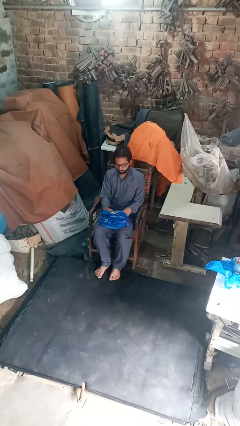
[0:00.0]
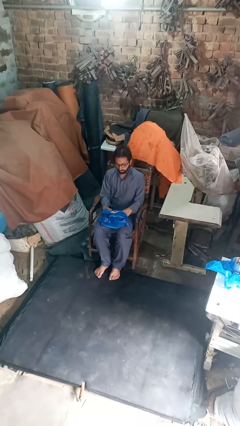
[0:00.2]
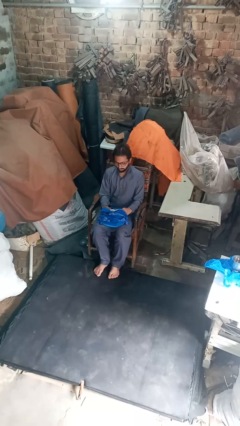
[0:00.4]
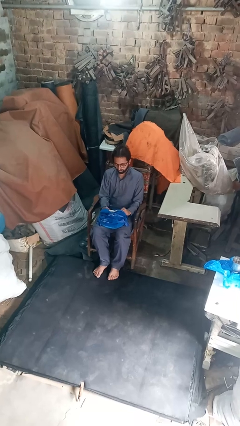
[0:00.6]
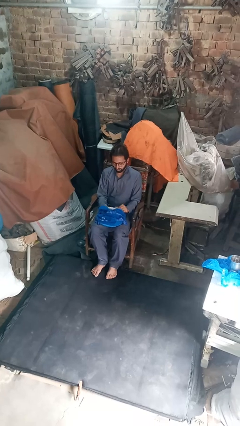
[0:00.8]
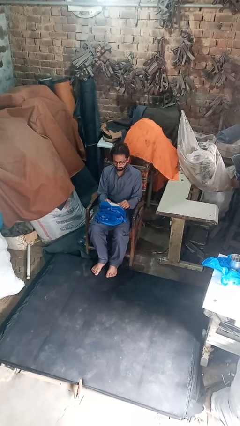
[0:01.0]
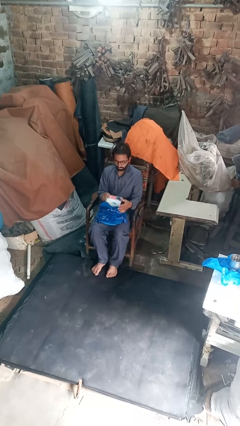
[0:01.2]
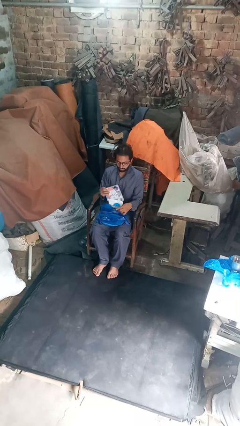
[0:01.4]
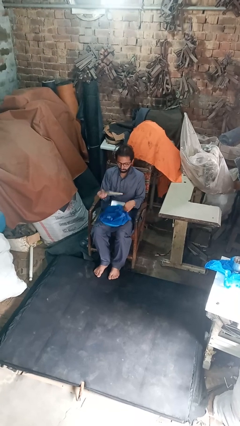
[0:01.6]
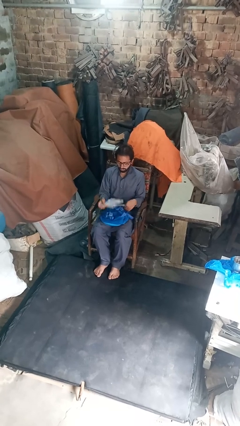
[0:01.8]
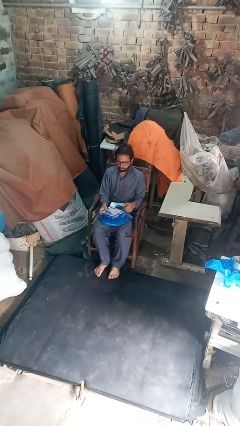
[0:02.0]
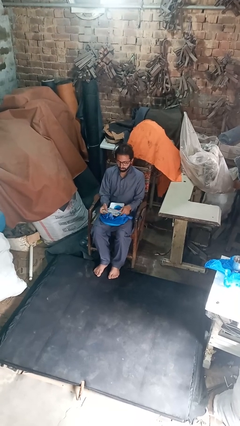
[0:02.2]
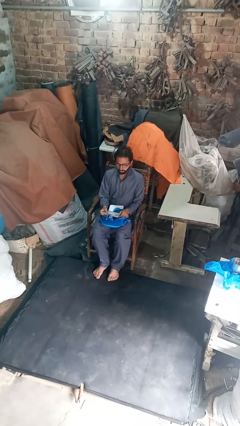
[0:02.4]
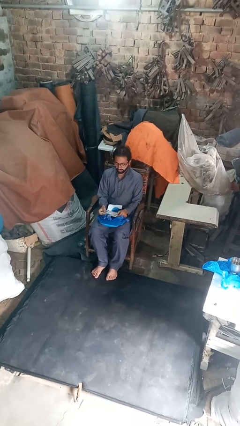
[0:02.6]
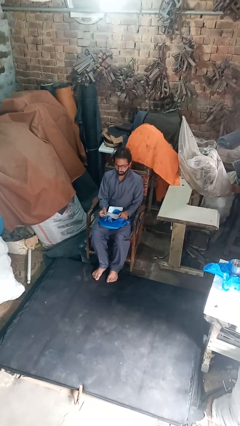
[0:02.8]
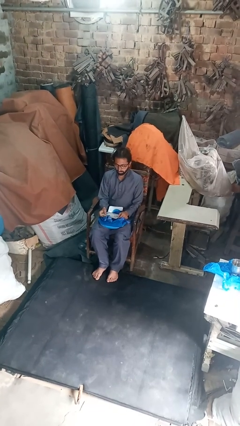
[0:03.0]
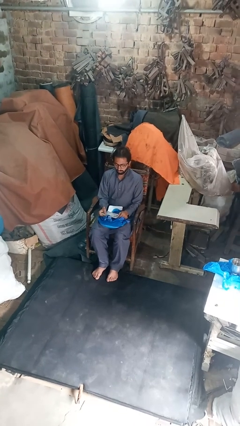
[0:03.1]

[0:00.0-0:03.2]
person takes object from backpack

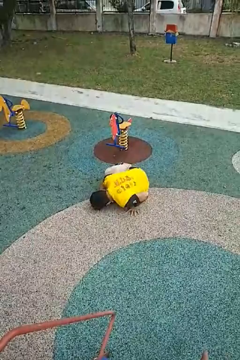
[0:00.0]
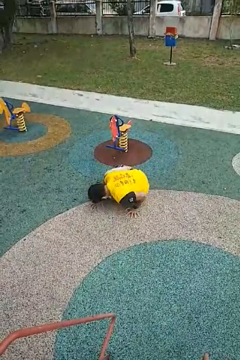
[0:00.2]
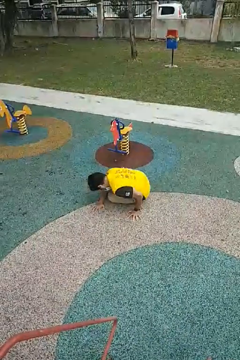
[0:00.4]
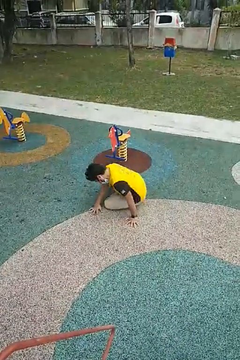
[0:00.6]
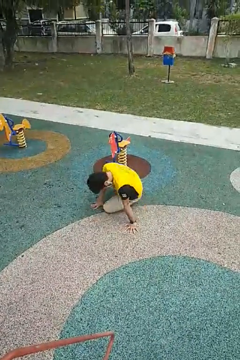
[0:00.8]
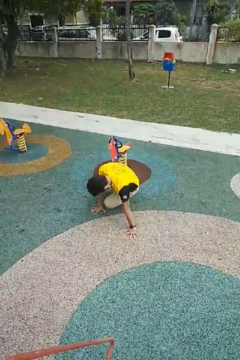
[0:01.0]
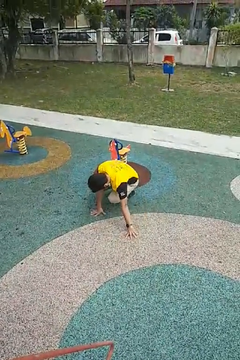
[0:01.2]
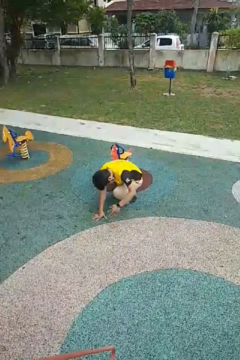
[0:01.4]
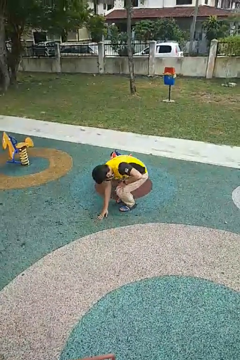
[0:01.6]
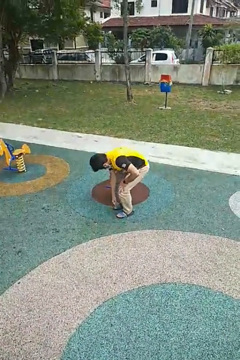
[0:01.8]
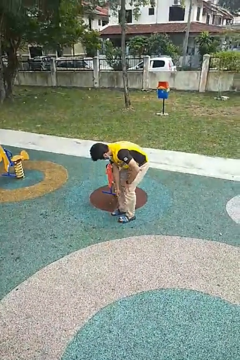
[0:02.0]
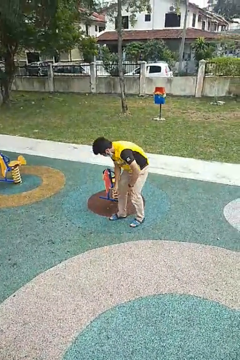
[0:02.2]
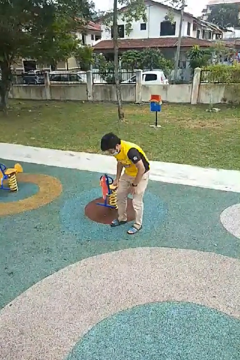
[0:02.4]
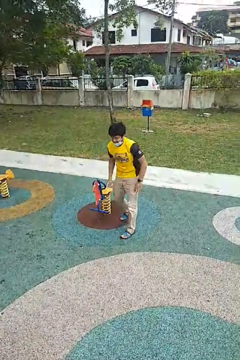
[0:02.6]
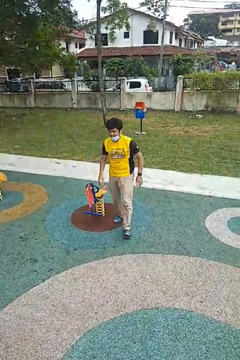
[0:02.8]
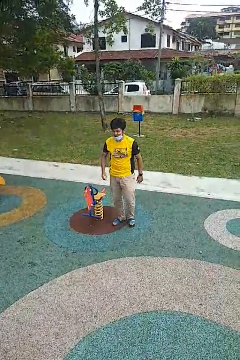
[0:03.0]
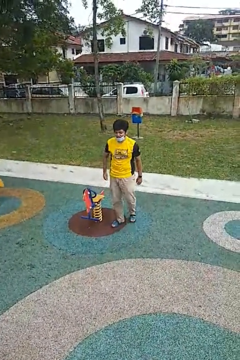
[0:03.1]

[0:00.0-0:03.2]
person stands up from floor

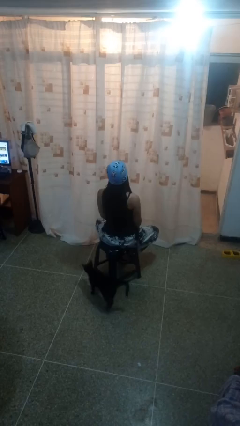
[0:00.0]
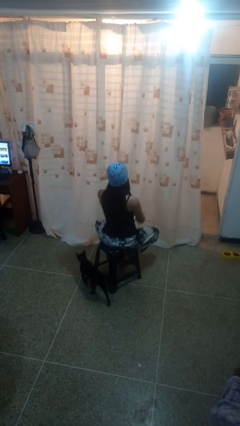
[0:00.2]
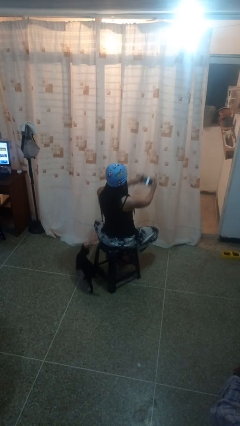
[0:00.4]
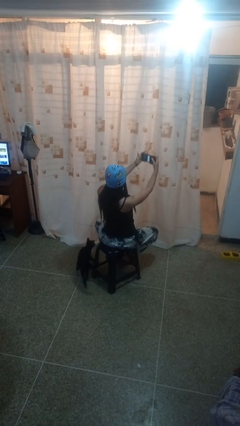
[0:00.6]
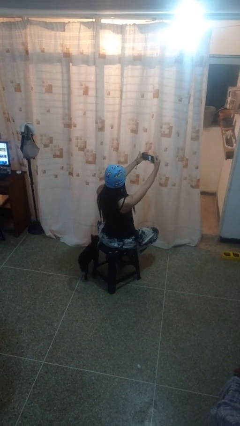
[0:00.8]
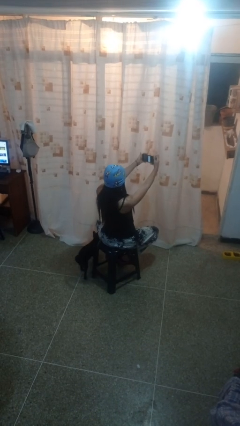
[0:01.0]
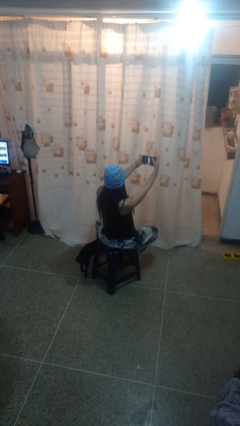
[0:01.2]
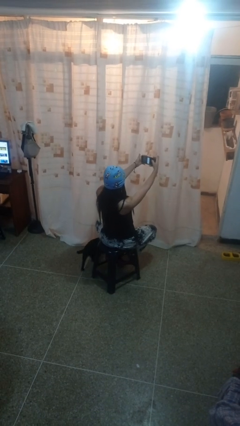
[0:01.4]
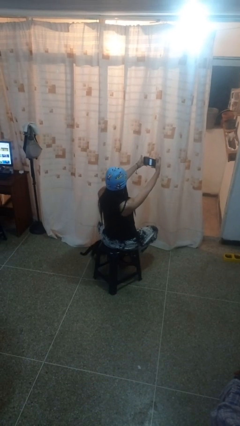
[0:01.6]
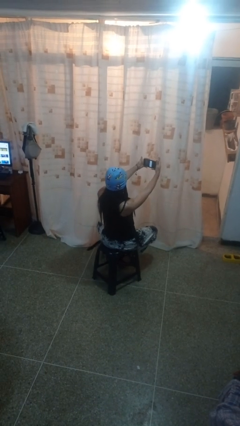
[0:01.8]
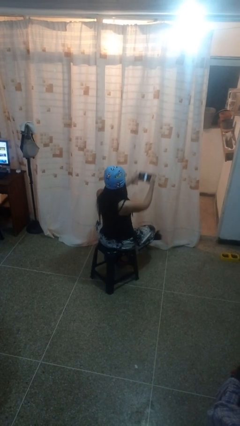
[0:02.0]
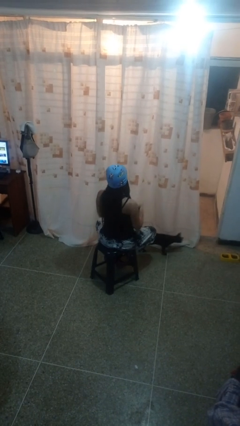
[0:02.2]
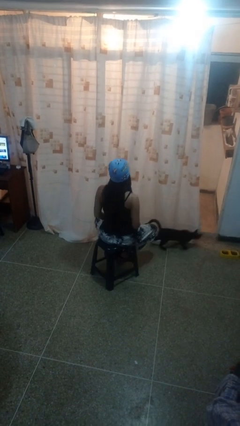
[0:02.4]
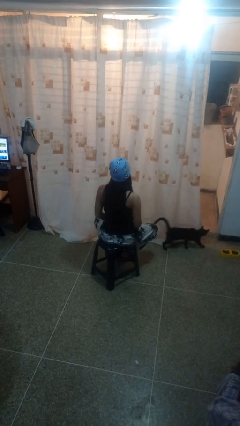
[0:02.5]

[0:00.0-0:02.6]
person takes selfie

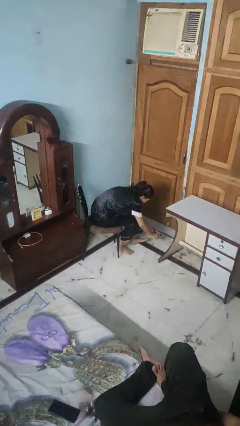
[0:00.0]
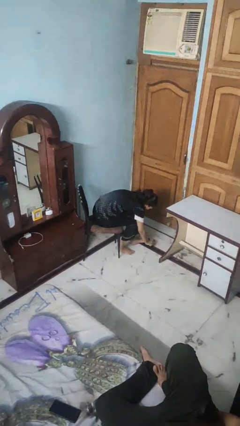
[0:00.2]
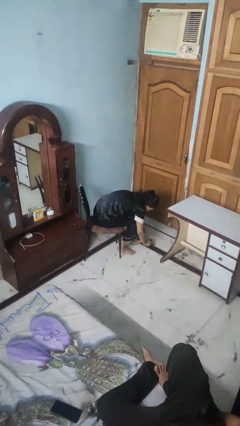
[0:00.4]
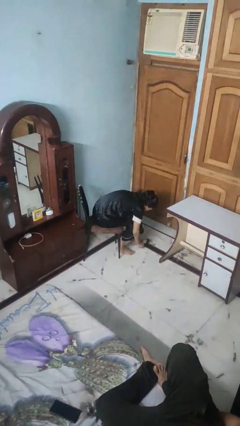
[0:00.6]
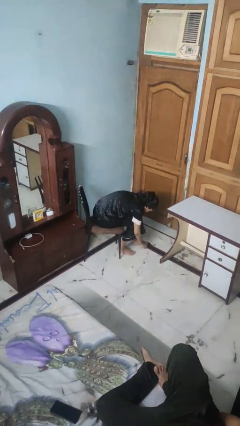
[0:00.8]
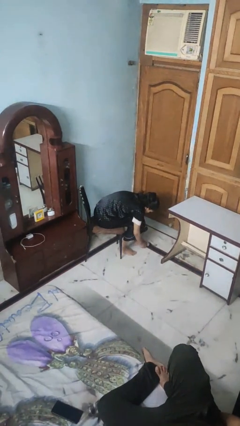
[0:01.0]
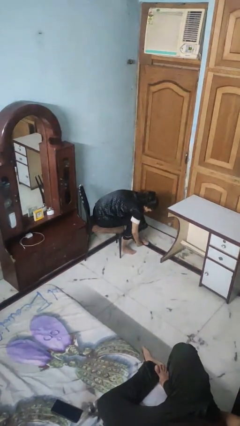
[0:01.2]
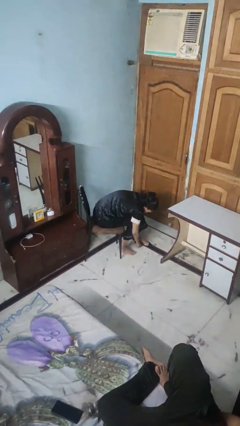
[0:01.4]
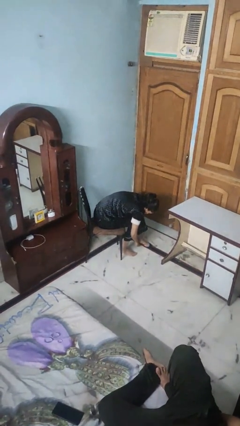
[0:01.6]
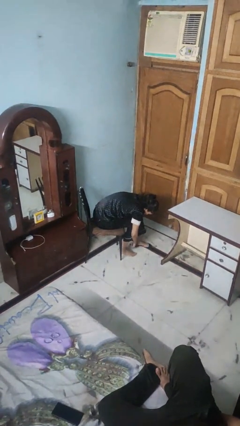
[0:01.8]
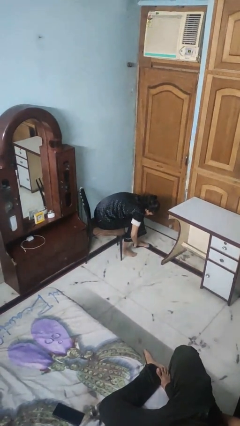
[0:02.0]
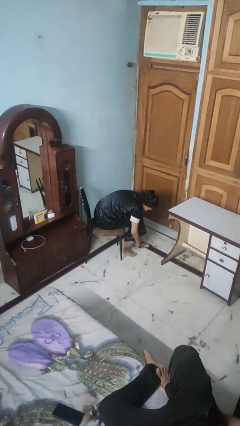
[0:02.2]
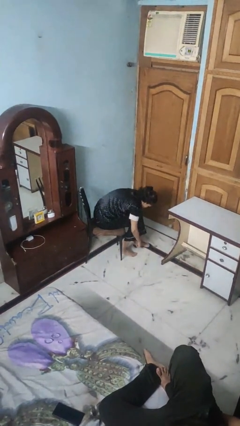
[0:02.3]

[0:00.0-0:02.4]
person puts on socks

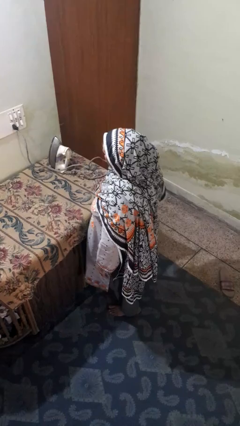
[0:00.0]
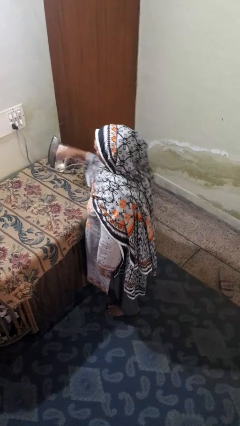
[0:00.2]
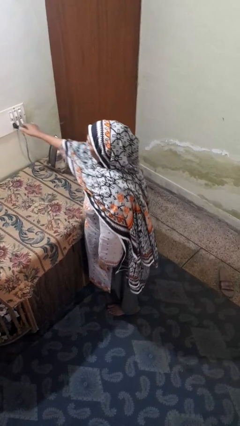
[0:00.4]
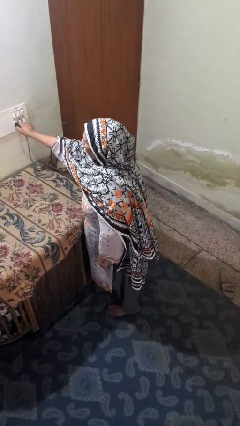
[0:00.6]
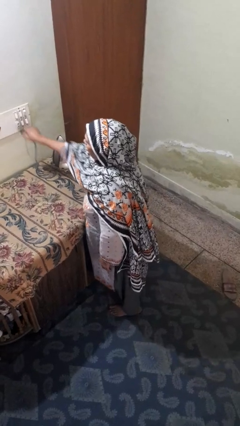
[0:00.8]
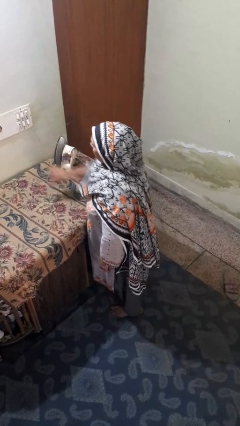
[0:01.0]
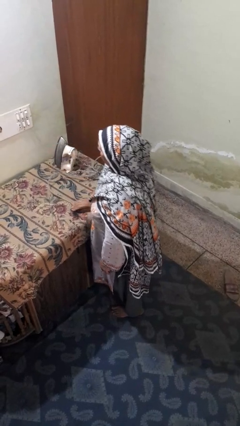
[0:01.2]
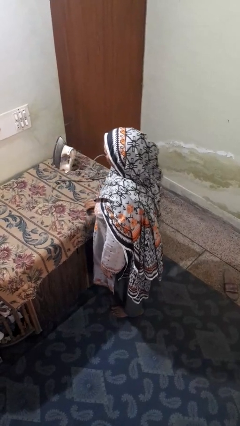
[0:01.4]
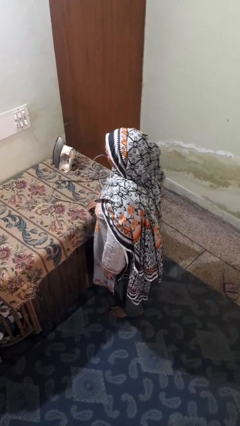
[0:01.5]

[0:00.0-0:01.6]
person unplugs from electrical socket

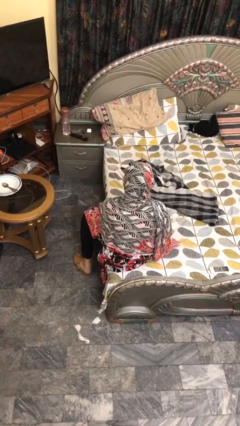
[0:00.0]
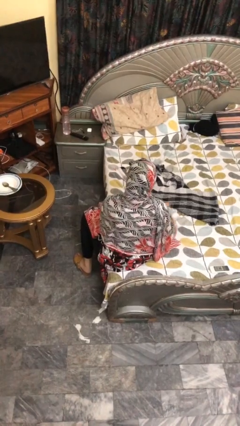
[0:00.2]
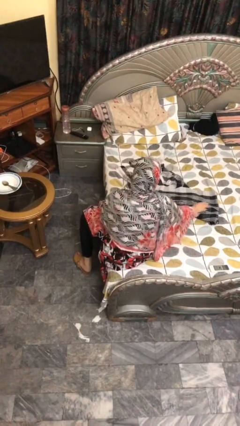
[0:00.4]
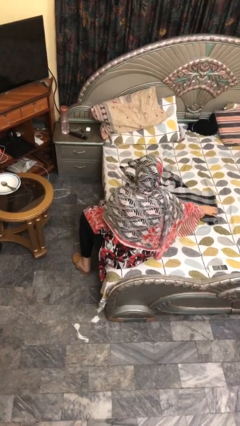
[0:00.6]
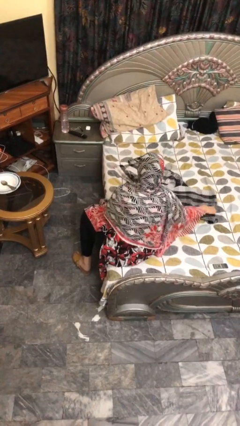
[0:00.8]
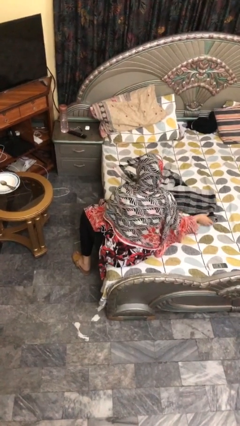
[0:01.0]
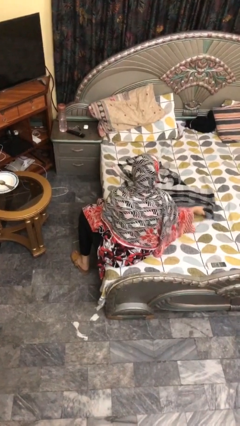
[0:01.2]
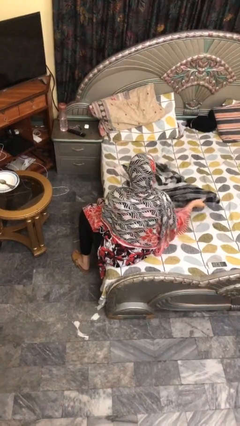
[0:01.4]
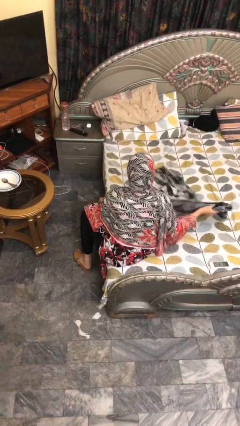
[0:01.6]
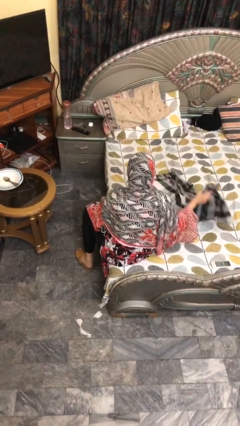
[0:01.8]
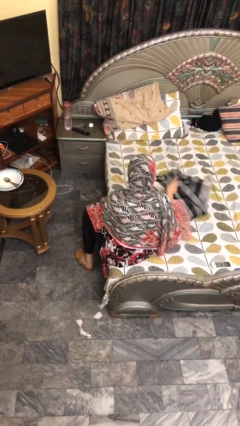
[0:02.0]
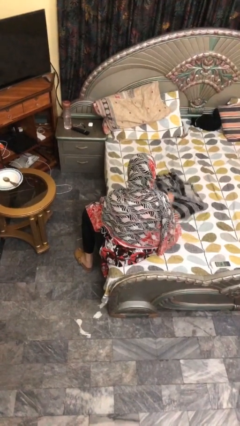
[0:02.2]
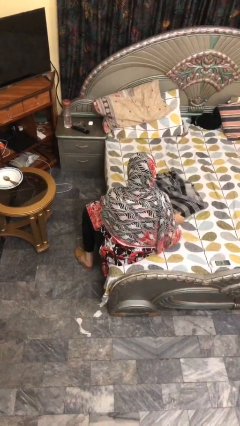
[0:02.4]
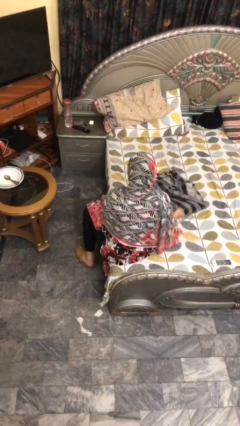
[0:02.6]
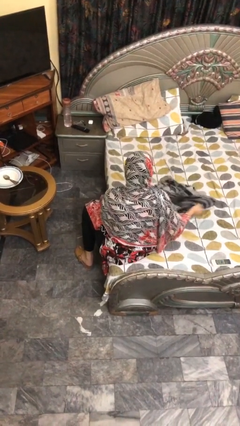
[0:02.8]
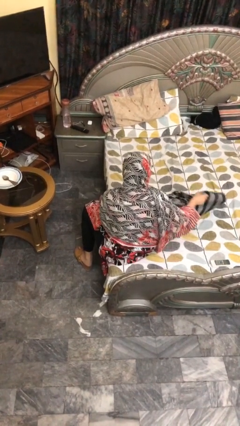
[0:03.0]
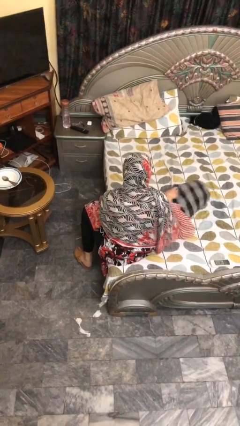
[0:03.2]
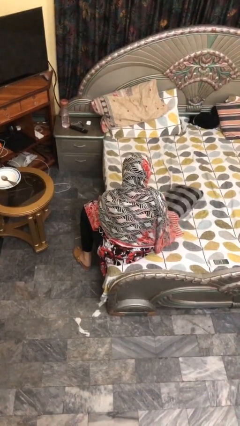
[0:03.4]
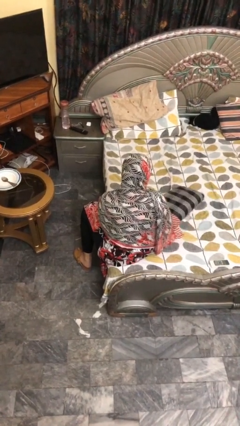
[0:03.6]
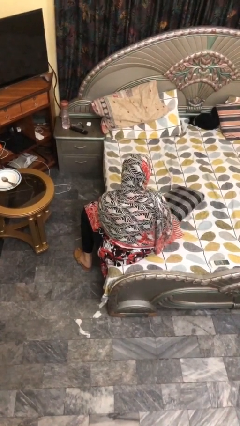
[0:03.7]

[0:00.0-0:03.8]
person folds blanket

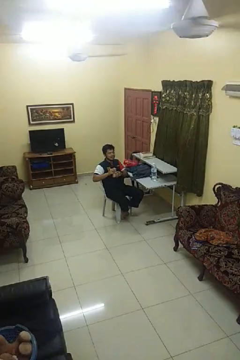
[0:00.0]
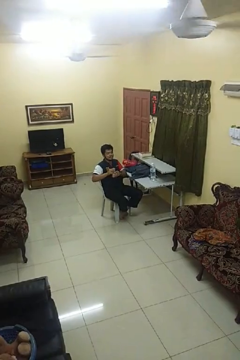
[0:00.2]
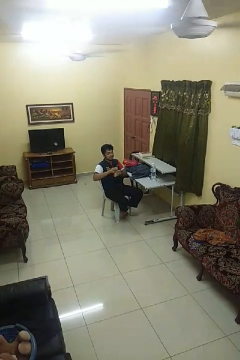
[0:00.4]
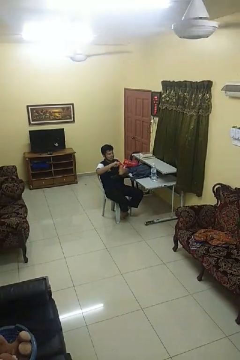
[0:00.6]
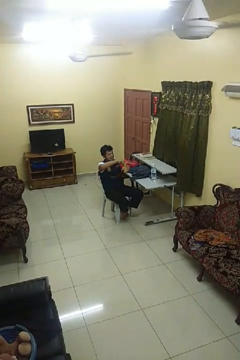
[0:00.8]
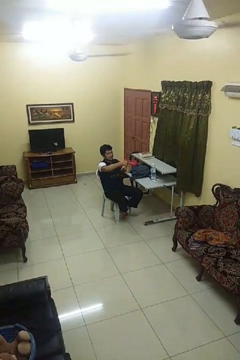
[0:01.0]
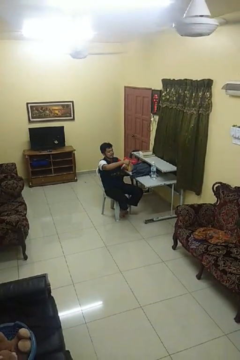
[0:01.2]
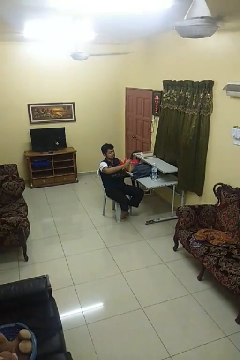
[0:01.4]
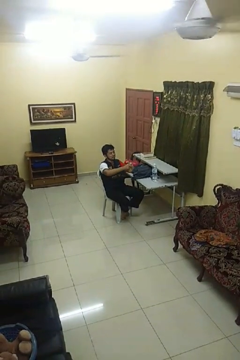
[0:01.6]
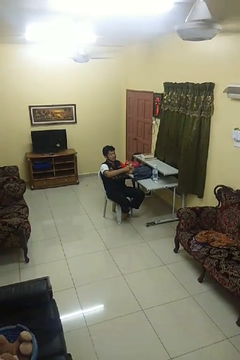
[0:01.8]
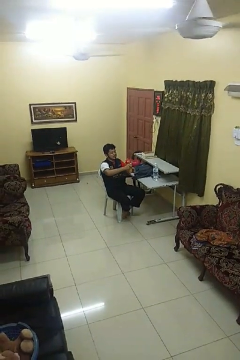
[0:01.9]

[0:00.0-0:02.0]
person opens beverage can
